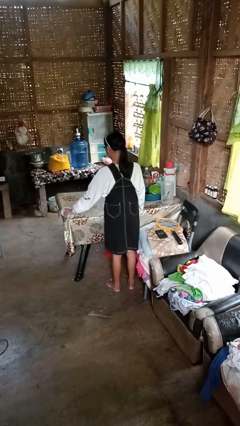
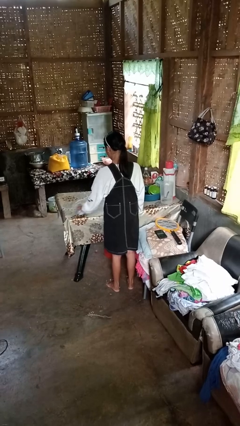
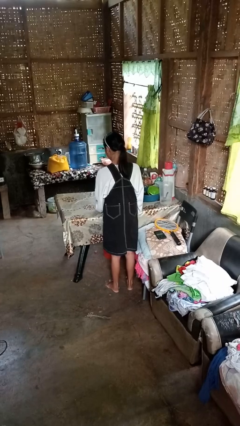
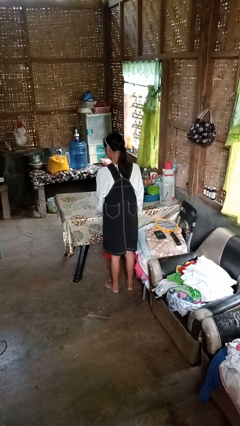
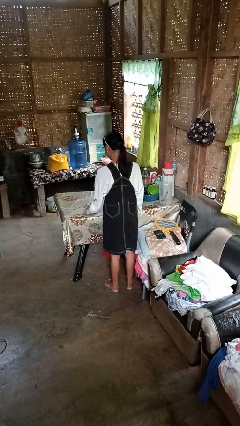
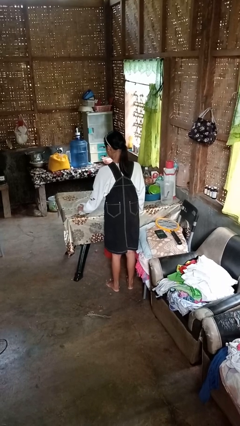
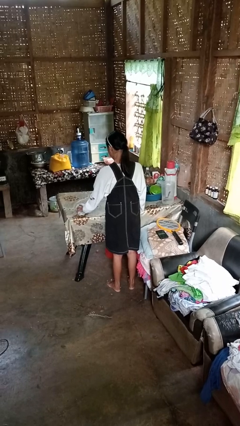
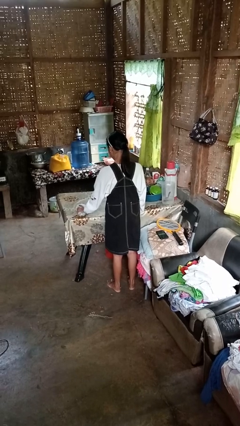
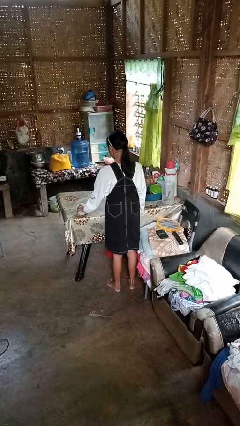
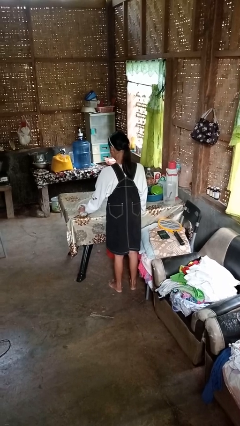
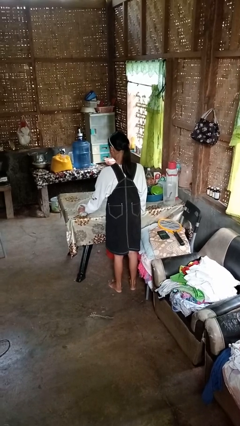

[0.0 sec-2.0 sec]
person cleans table with rag

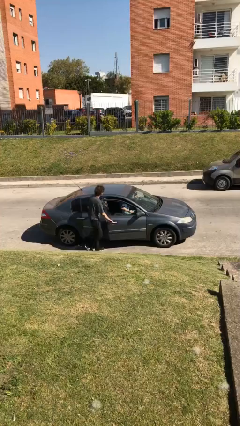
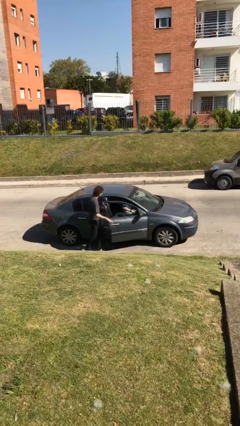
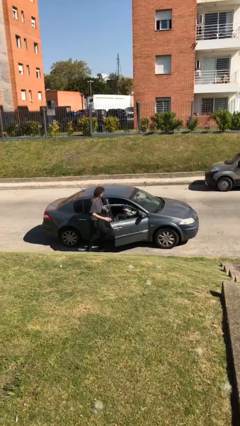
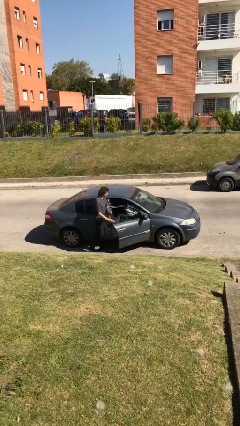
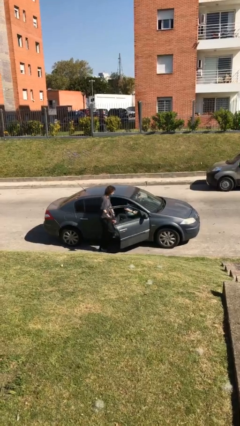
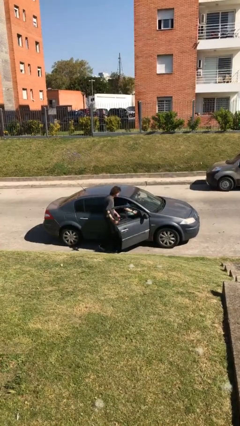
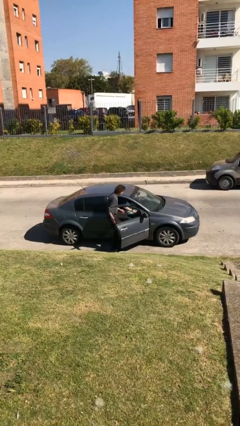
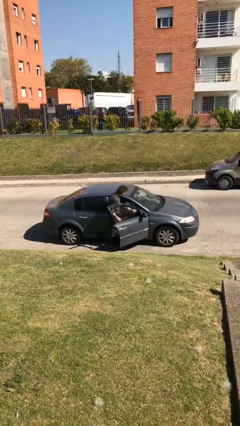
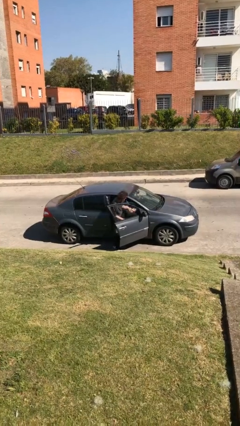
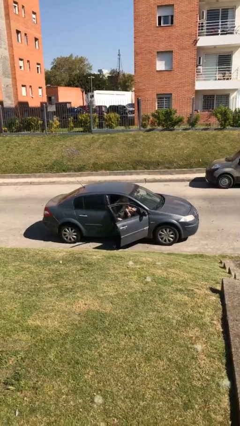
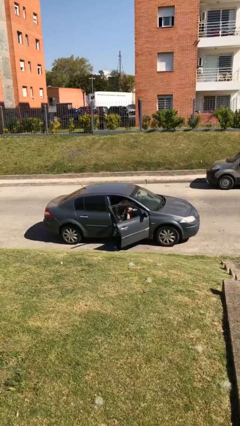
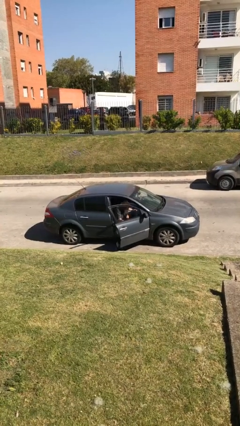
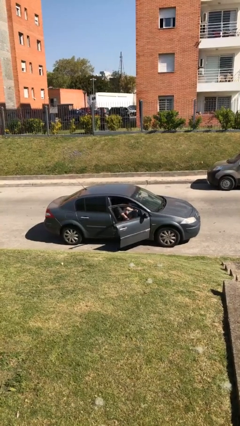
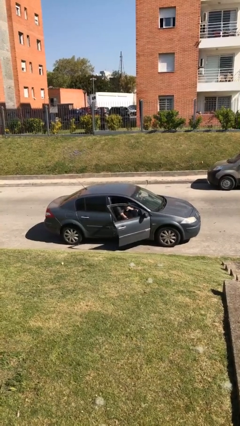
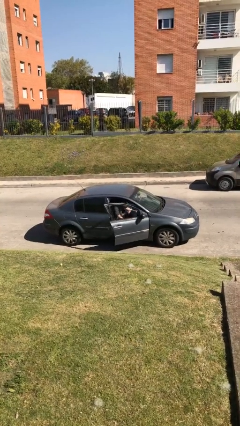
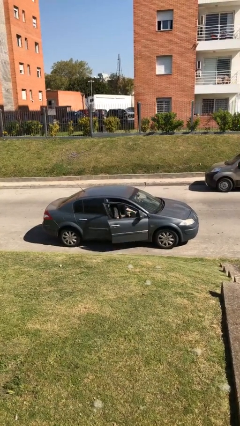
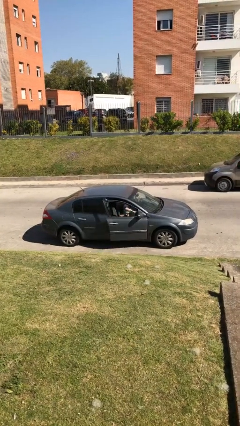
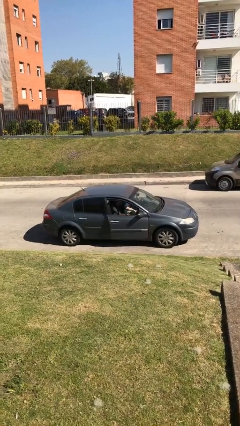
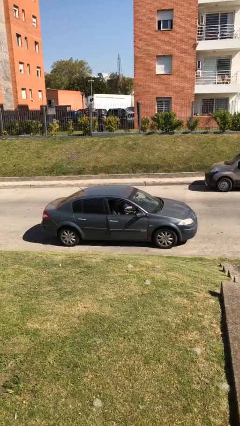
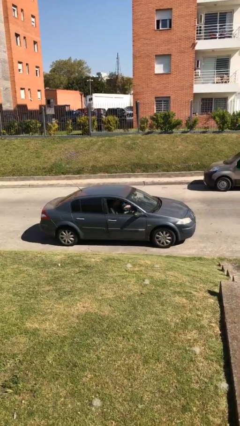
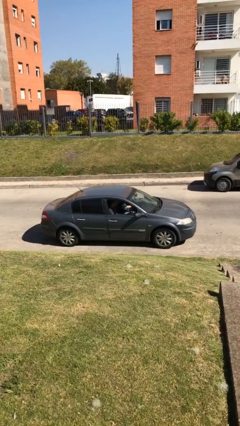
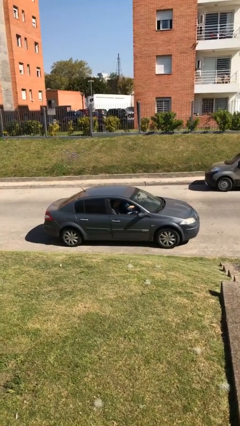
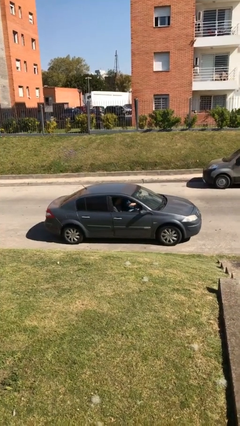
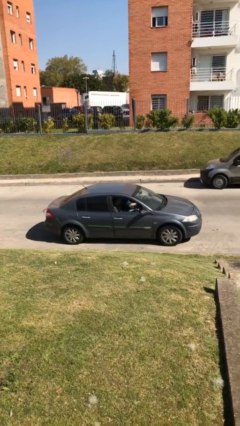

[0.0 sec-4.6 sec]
car picks up person

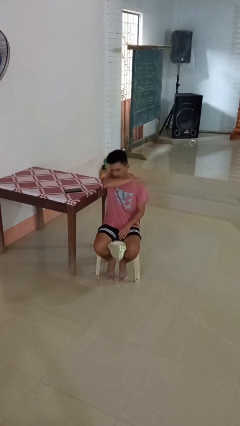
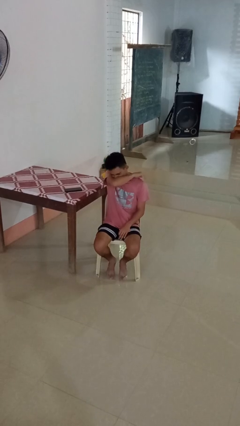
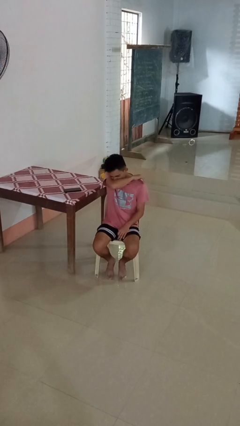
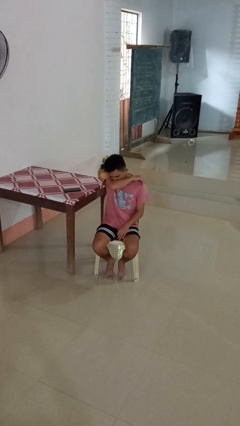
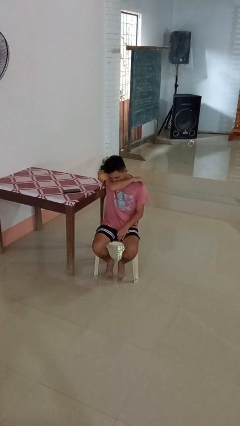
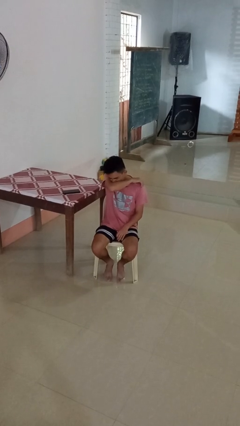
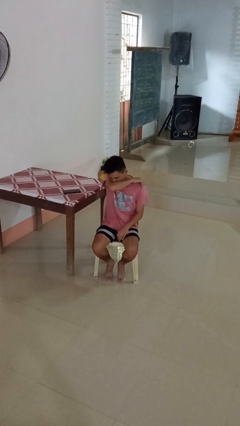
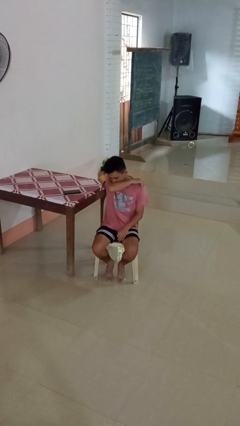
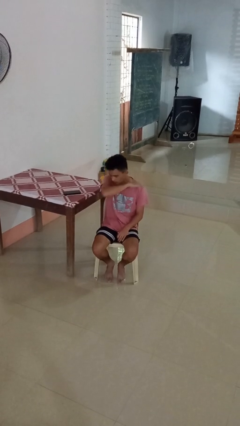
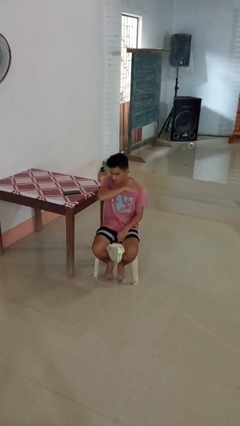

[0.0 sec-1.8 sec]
person sneezes into arm

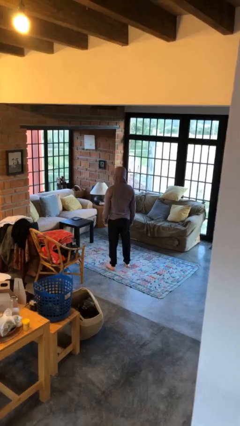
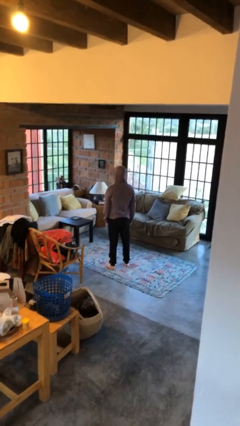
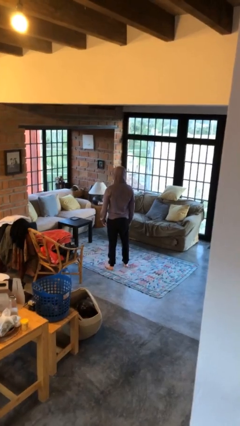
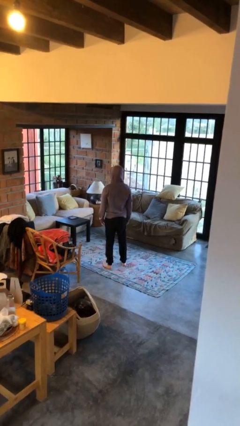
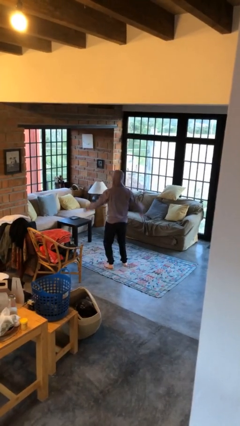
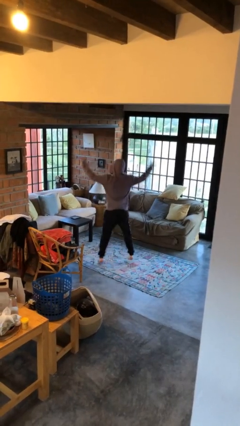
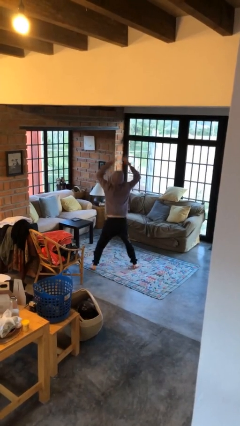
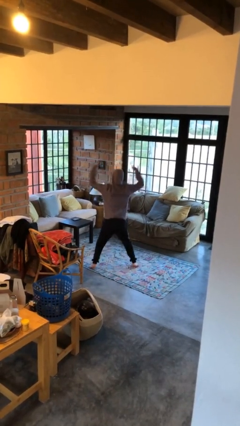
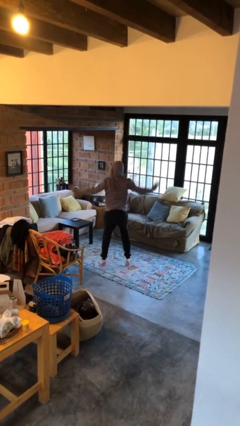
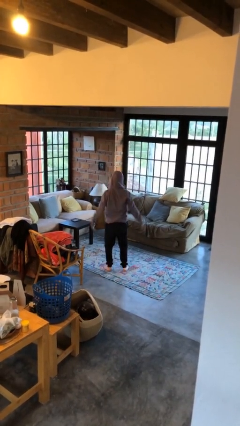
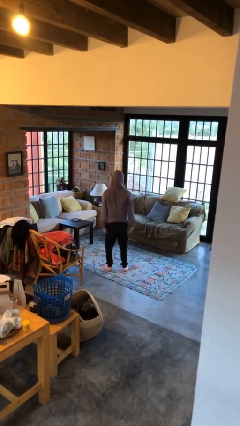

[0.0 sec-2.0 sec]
person exercises with jumping jacks

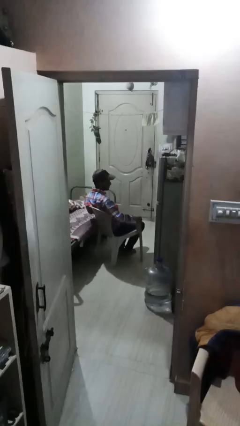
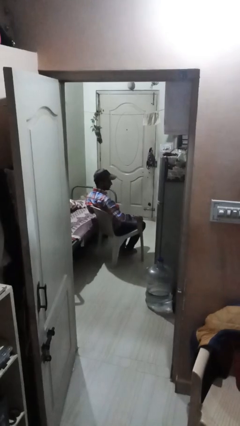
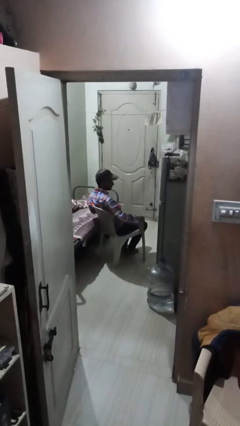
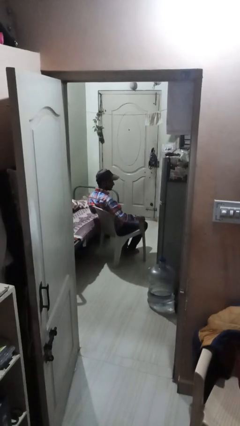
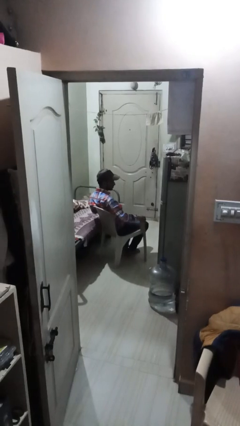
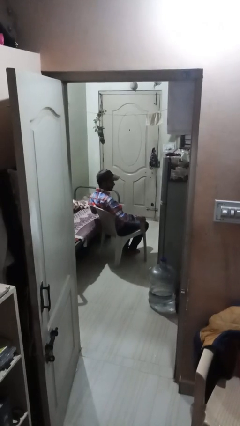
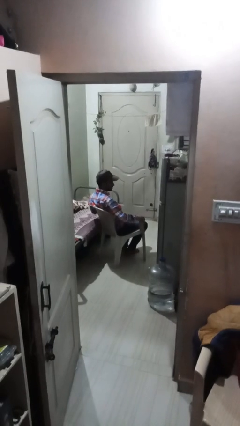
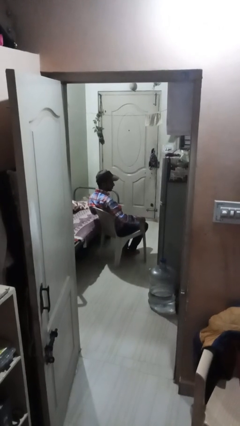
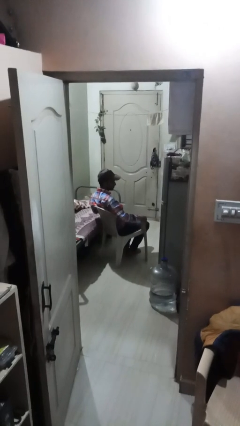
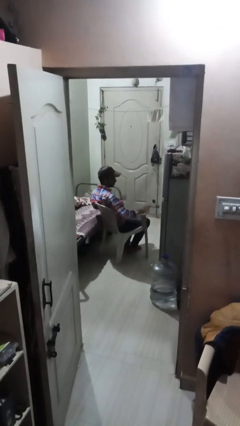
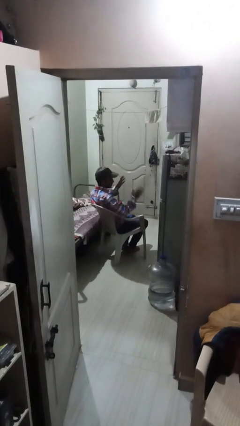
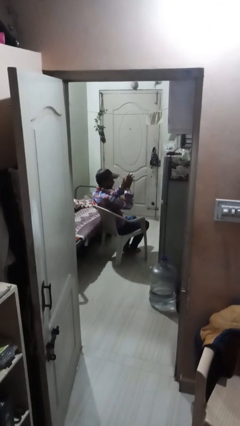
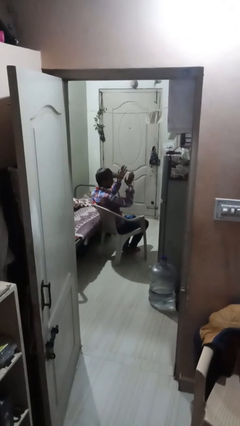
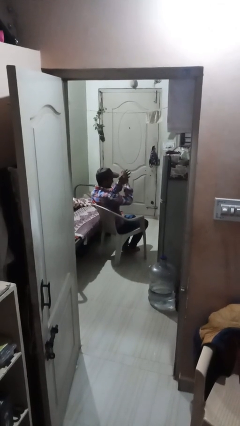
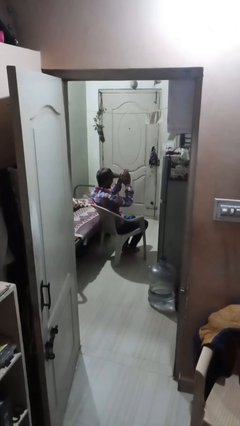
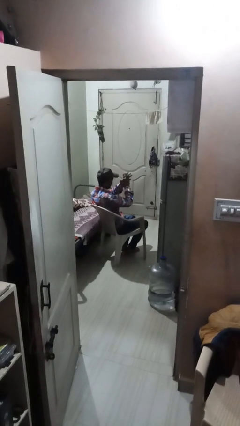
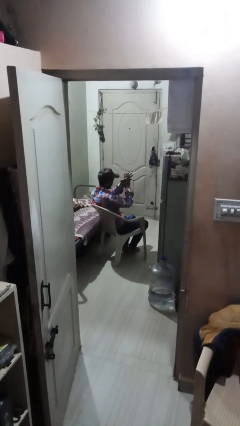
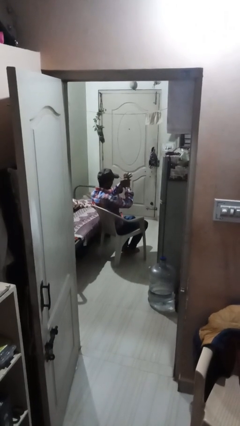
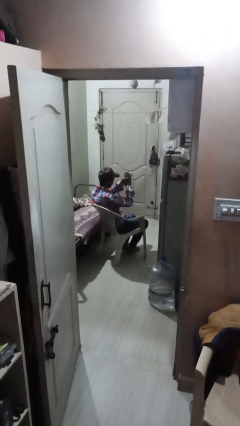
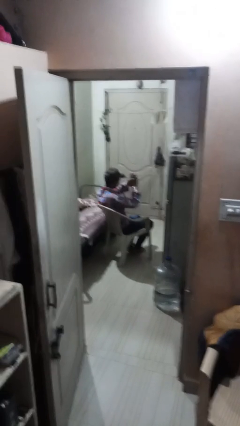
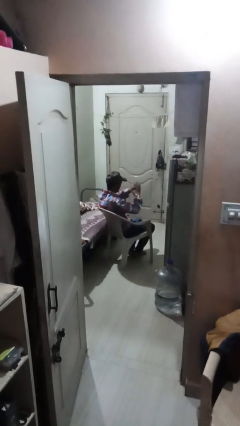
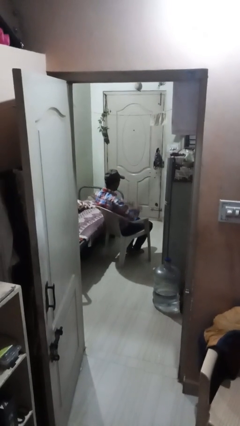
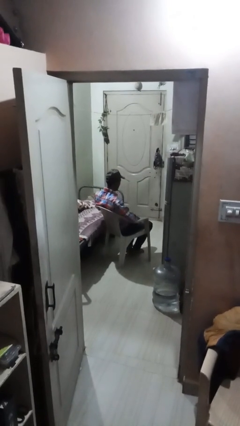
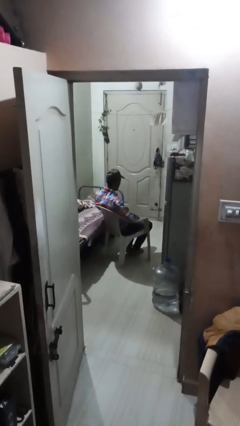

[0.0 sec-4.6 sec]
person claps hands

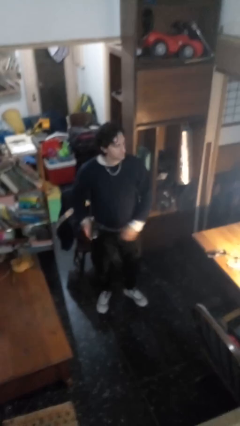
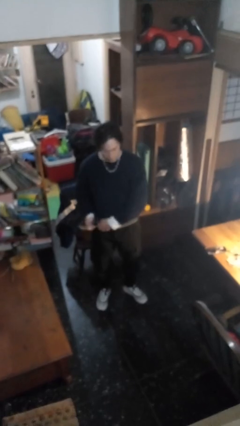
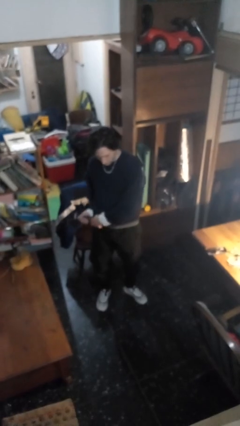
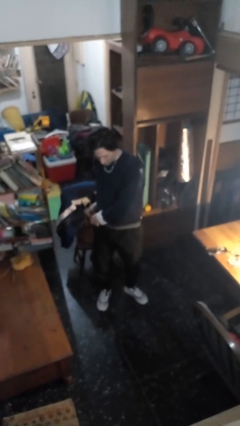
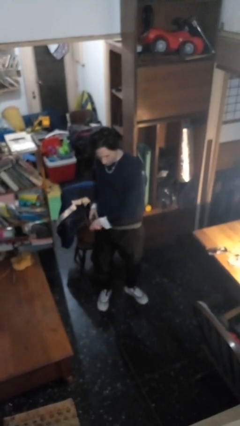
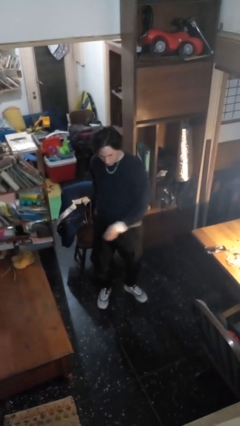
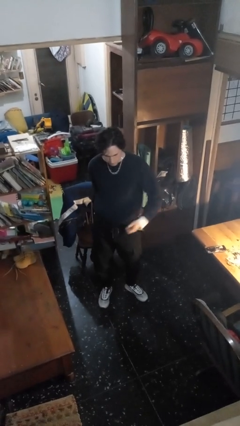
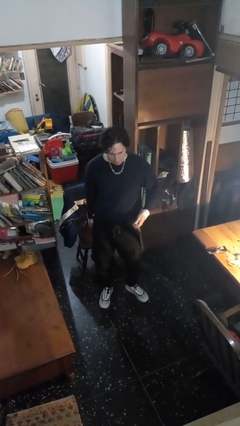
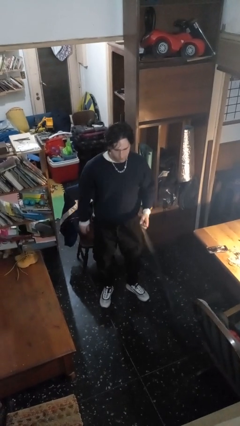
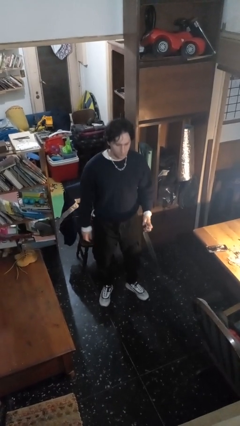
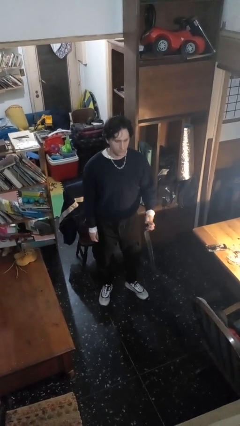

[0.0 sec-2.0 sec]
person takes off belt

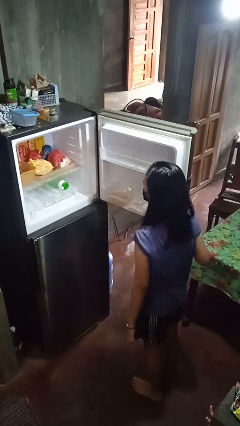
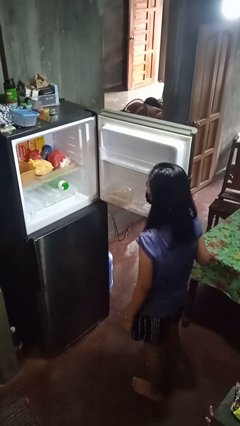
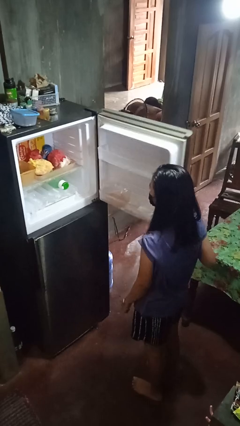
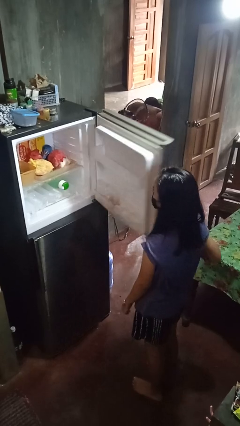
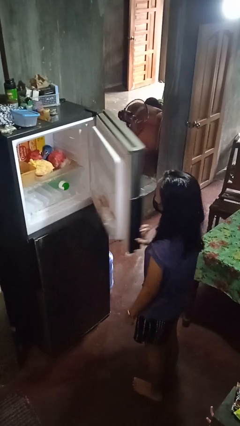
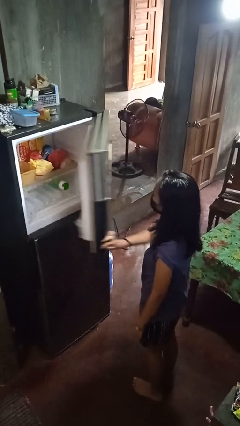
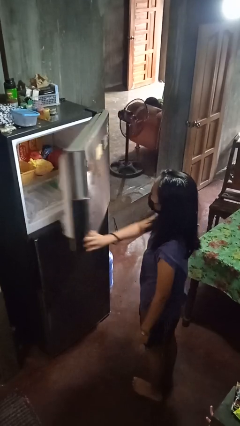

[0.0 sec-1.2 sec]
person closes refrigerator
